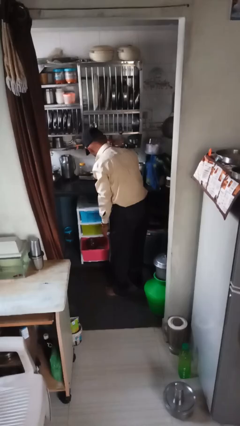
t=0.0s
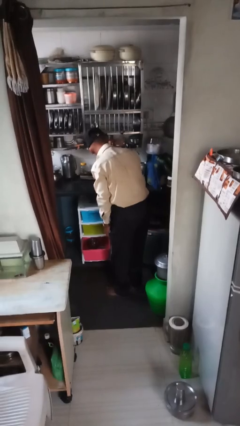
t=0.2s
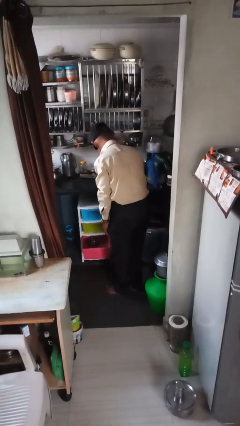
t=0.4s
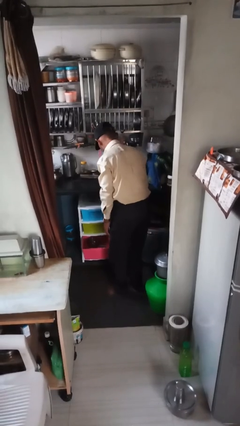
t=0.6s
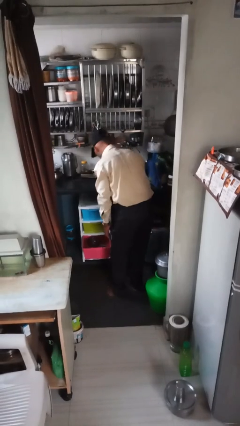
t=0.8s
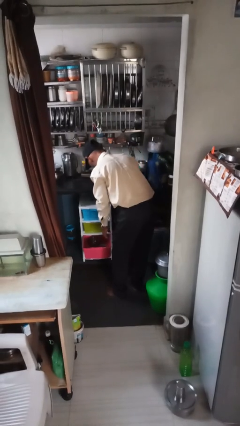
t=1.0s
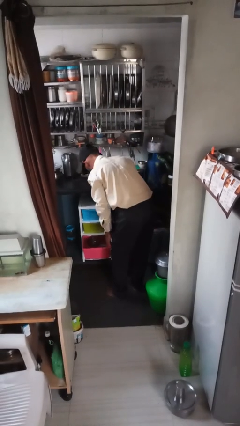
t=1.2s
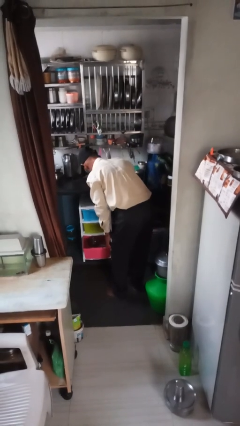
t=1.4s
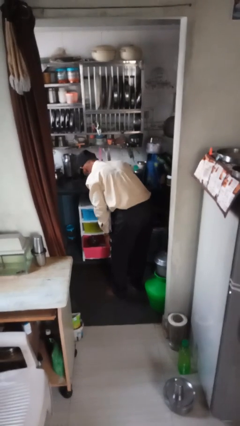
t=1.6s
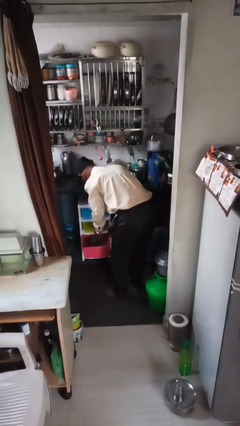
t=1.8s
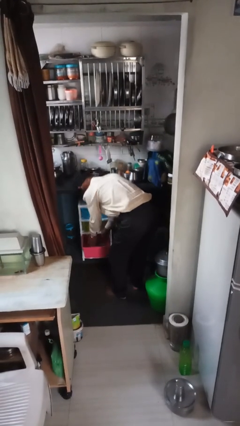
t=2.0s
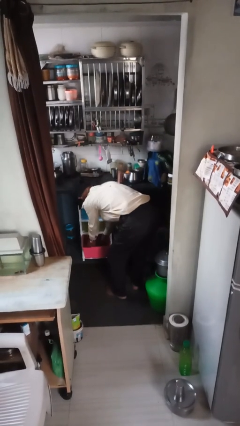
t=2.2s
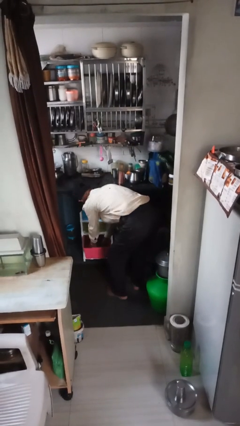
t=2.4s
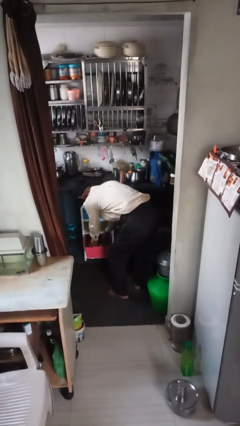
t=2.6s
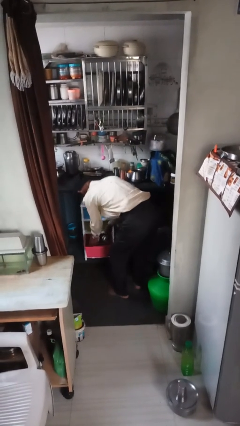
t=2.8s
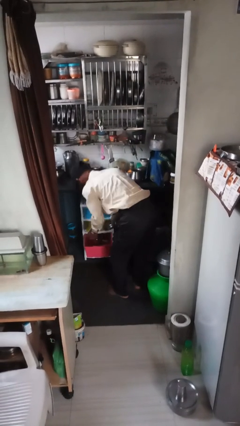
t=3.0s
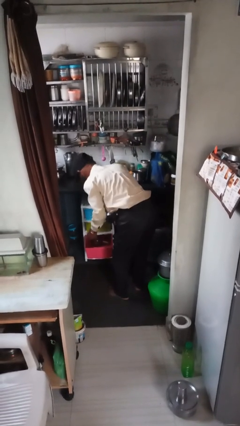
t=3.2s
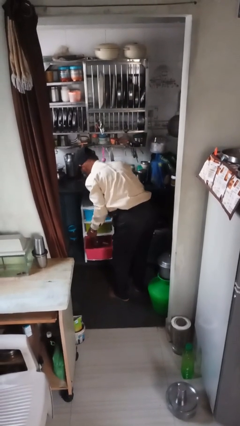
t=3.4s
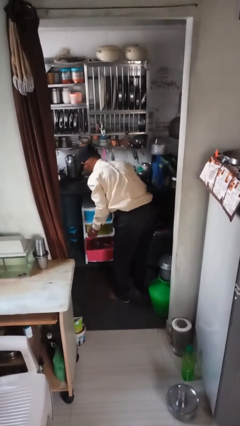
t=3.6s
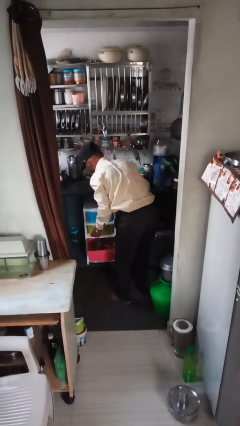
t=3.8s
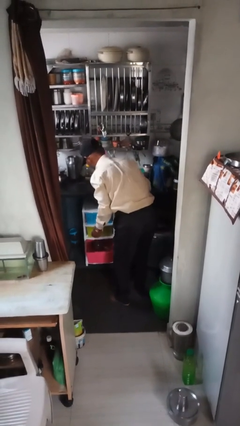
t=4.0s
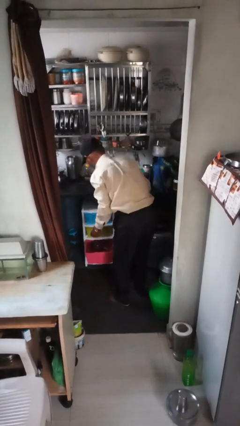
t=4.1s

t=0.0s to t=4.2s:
person takes object from kitchen drawer

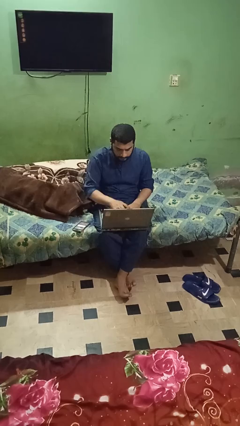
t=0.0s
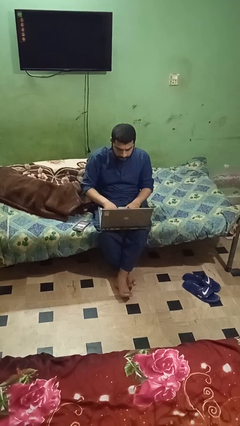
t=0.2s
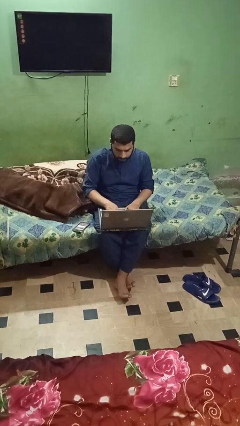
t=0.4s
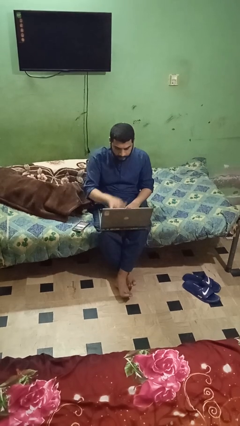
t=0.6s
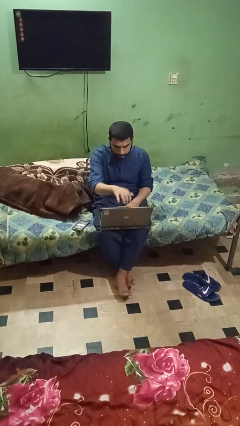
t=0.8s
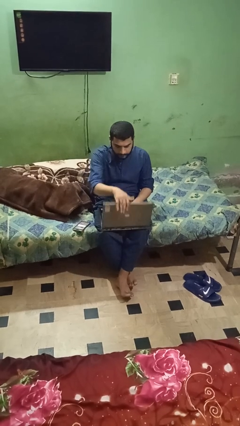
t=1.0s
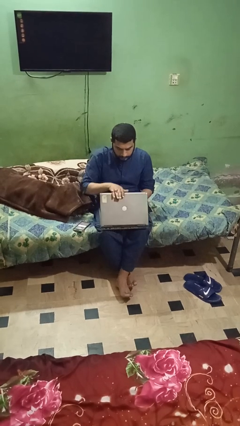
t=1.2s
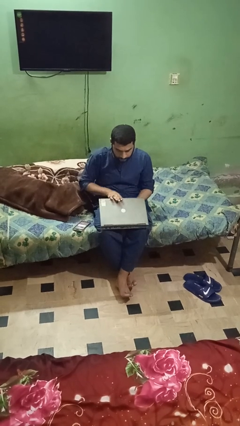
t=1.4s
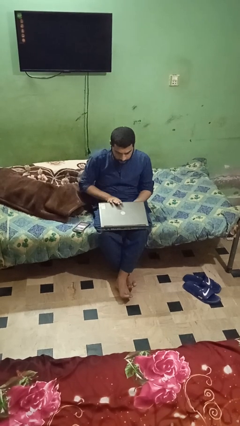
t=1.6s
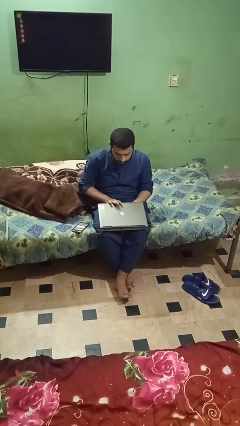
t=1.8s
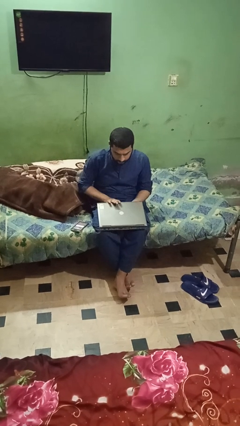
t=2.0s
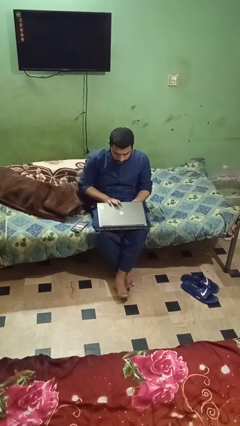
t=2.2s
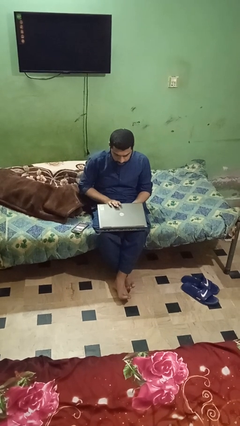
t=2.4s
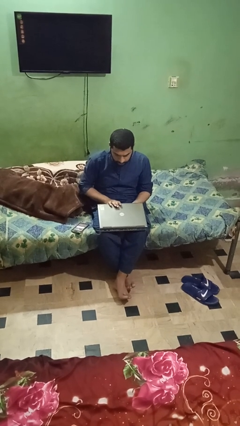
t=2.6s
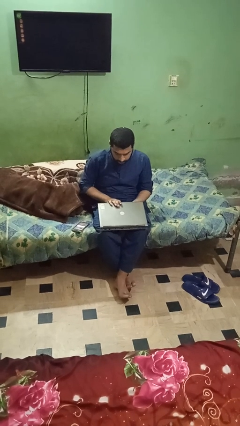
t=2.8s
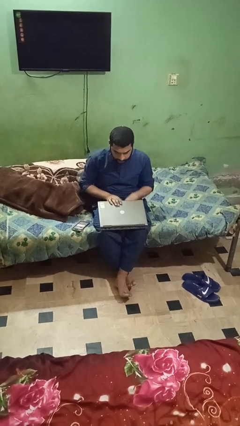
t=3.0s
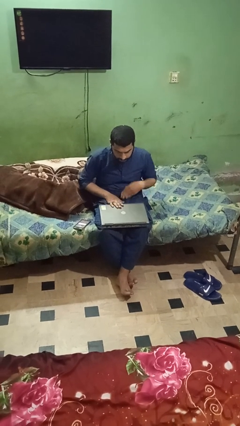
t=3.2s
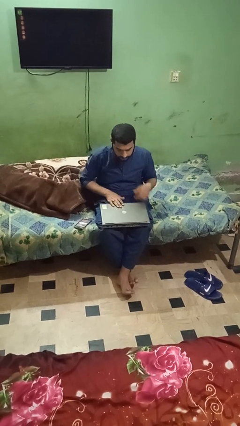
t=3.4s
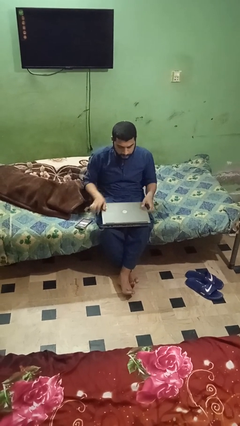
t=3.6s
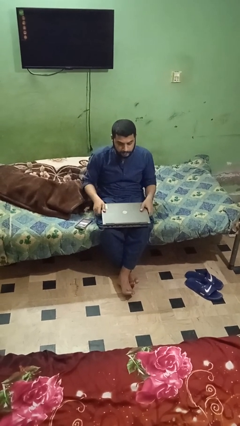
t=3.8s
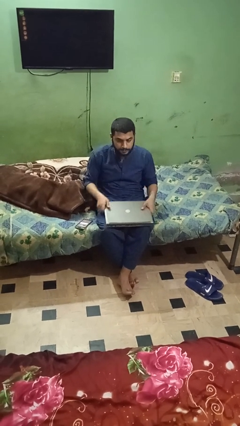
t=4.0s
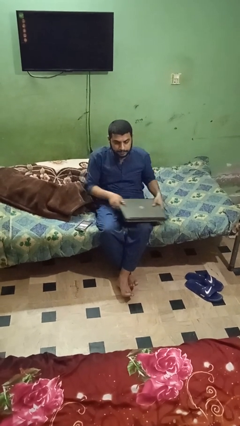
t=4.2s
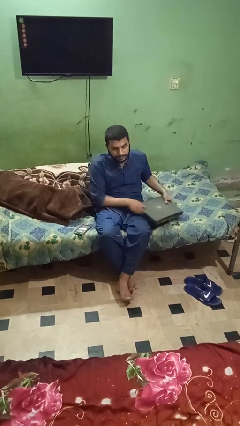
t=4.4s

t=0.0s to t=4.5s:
person closes laptop

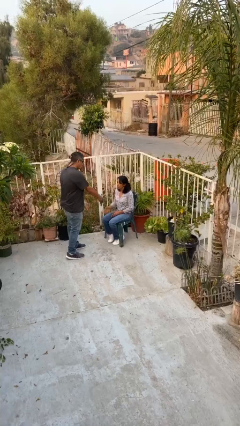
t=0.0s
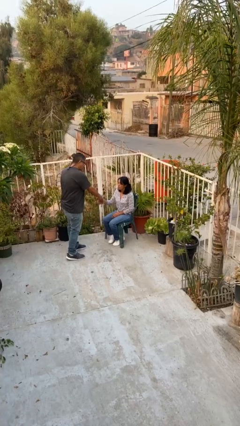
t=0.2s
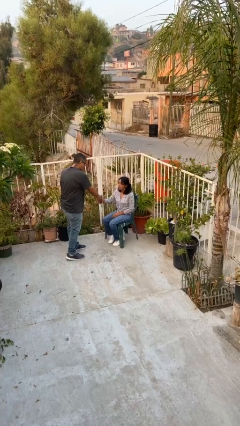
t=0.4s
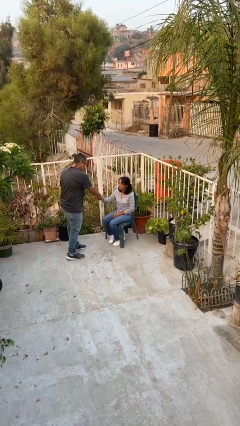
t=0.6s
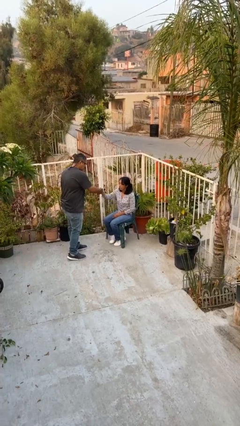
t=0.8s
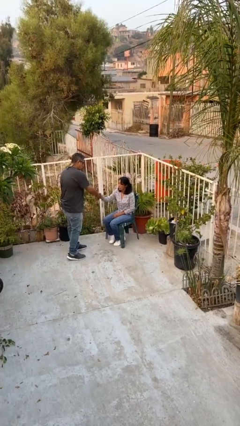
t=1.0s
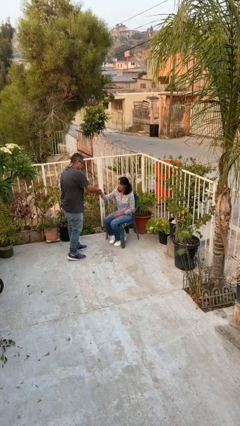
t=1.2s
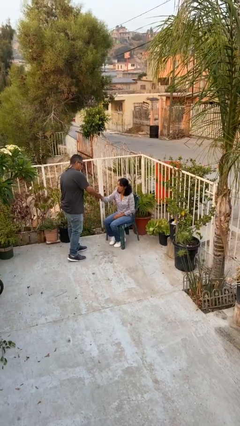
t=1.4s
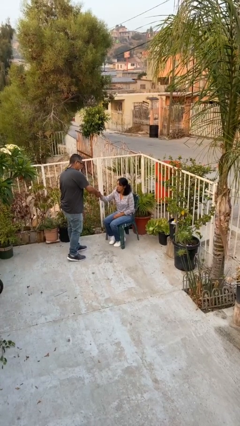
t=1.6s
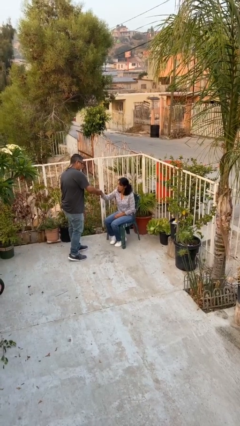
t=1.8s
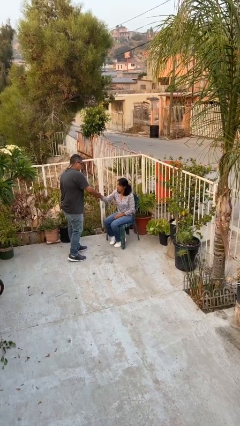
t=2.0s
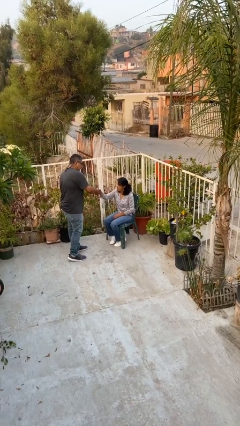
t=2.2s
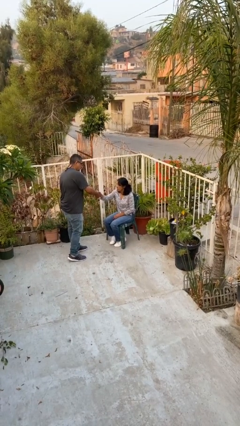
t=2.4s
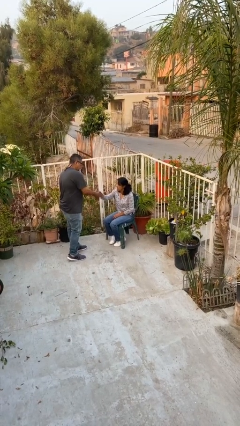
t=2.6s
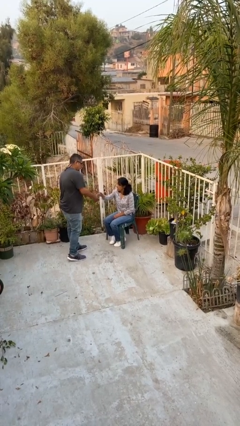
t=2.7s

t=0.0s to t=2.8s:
person shakes hand

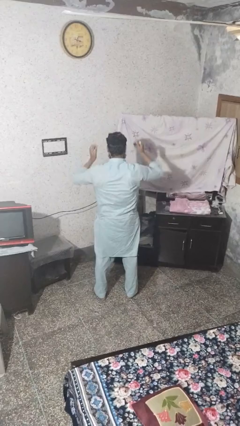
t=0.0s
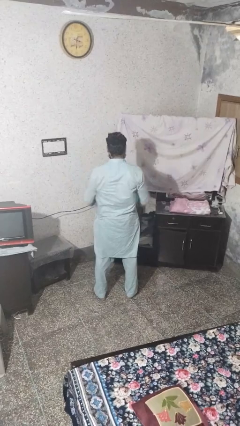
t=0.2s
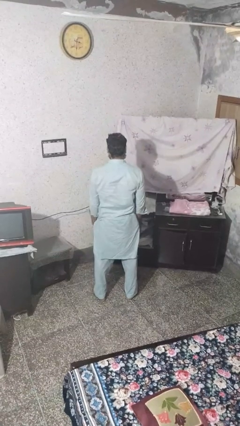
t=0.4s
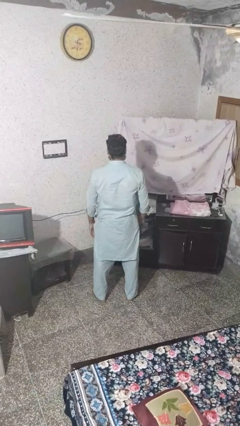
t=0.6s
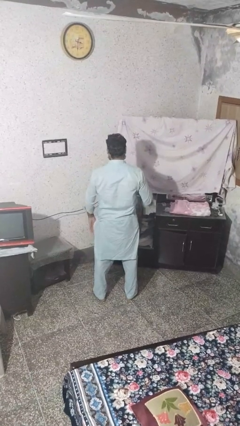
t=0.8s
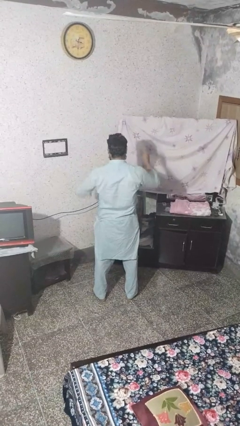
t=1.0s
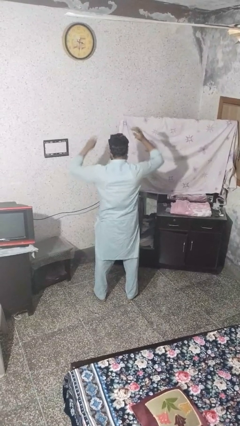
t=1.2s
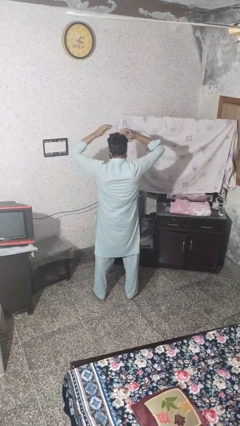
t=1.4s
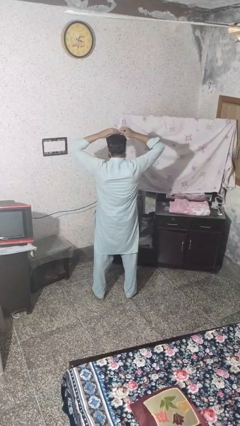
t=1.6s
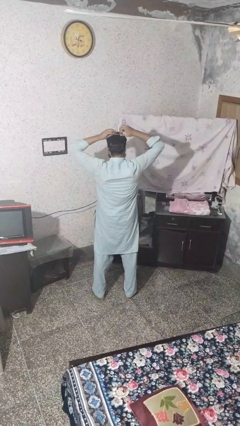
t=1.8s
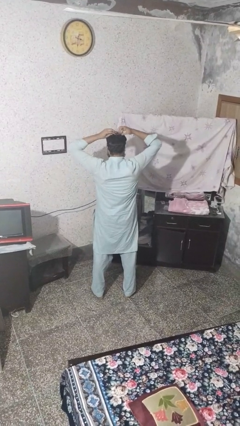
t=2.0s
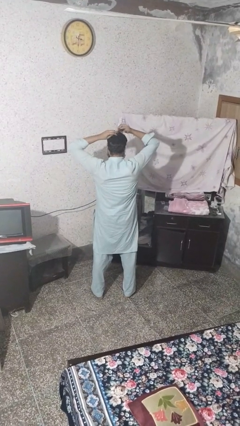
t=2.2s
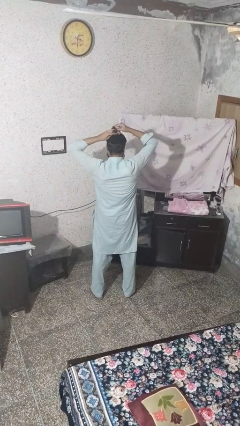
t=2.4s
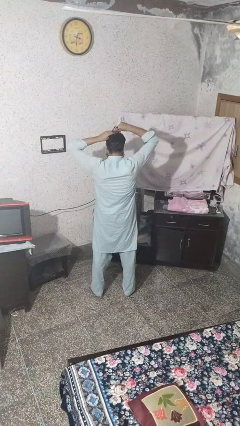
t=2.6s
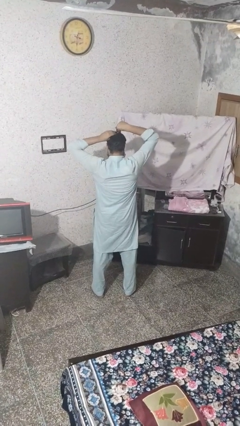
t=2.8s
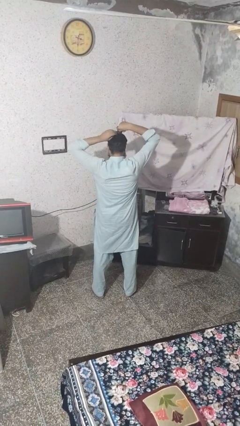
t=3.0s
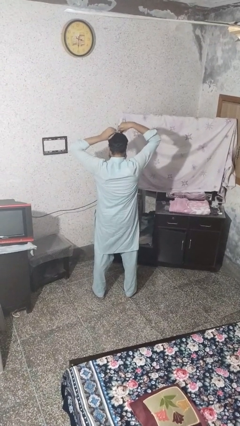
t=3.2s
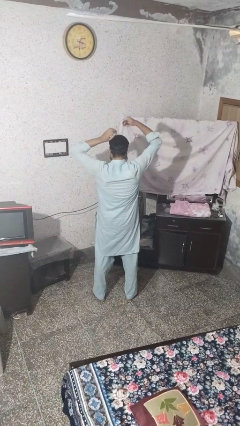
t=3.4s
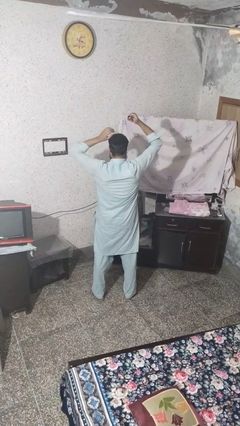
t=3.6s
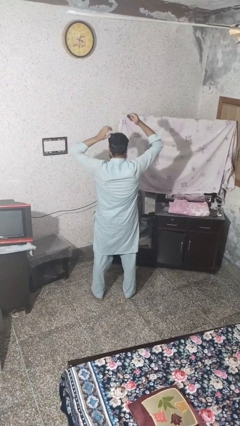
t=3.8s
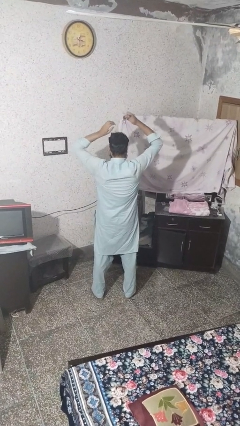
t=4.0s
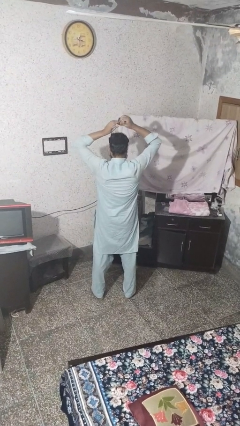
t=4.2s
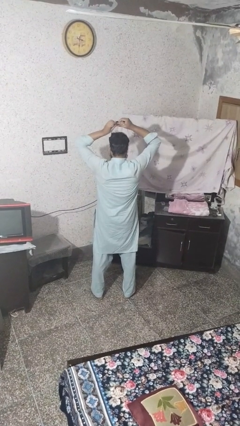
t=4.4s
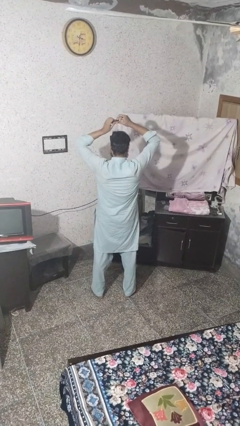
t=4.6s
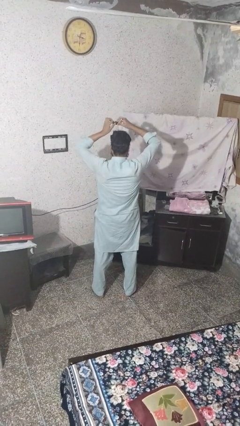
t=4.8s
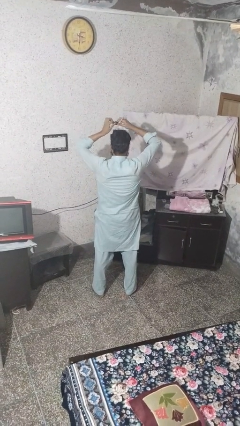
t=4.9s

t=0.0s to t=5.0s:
person takes off hairtie

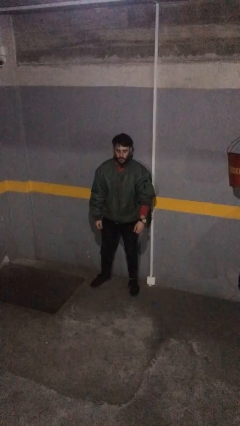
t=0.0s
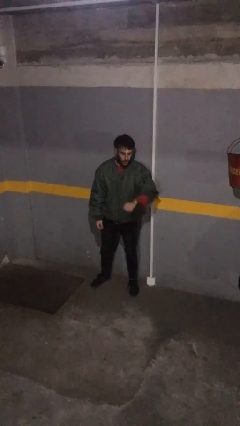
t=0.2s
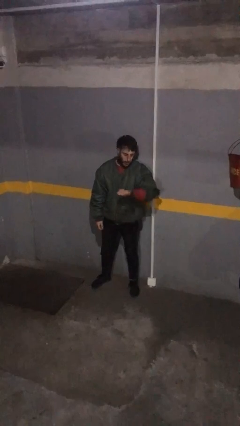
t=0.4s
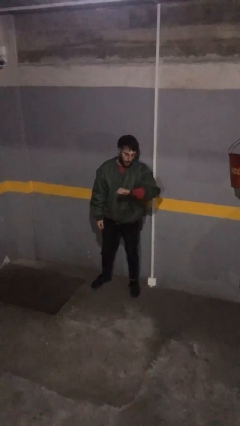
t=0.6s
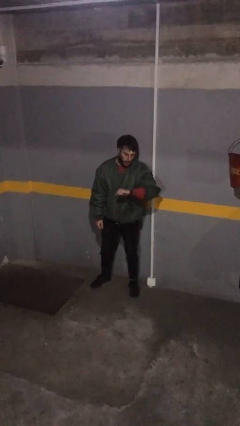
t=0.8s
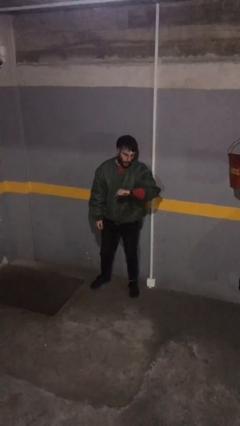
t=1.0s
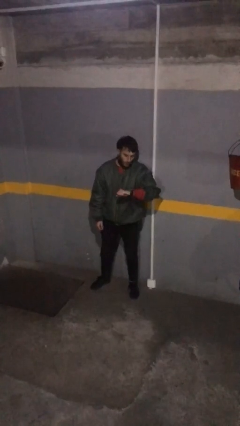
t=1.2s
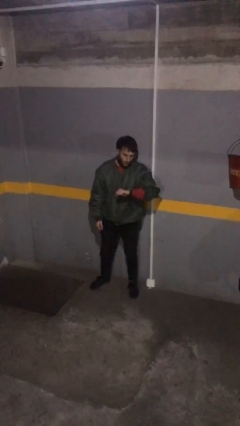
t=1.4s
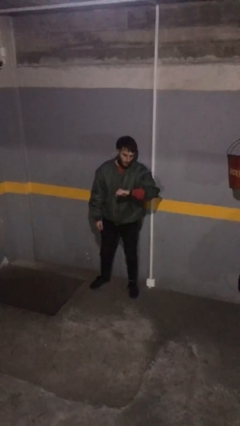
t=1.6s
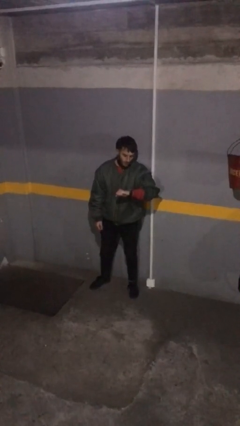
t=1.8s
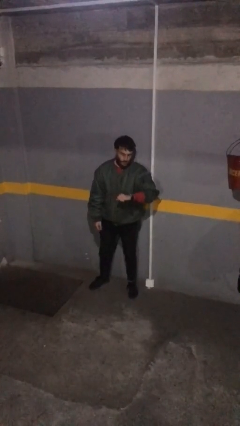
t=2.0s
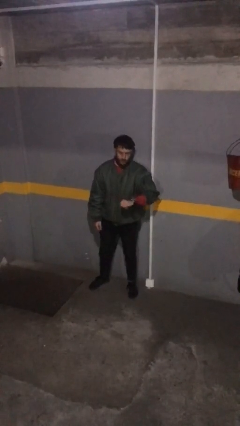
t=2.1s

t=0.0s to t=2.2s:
person looks at wristwatch
